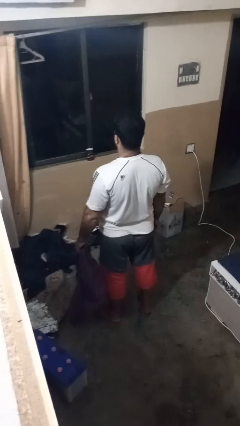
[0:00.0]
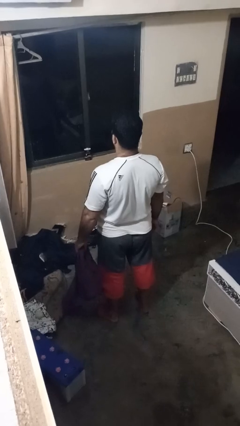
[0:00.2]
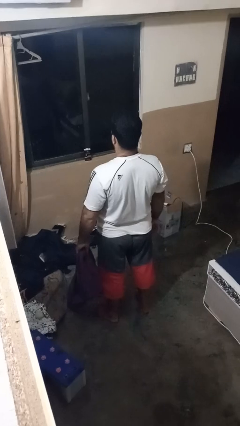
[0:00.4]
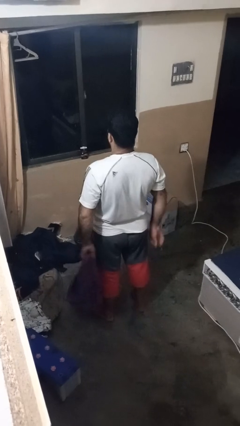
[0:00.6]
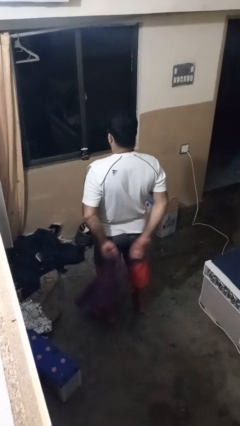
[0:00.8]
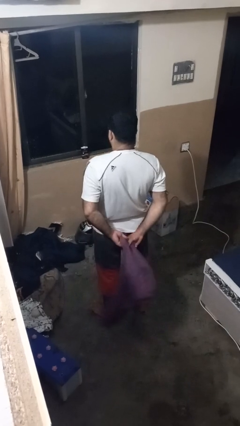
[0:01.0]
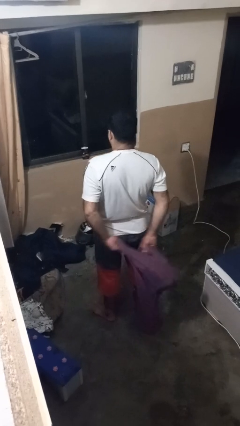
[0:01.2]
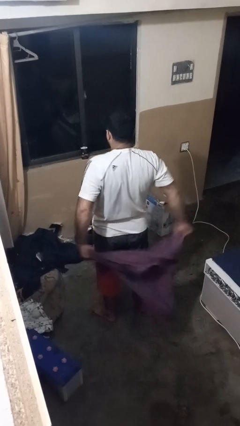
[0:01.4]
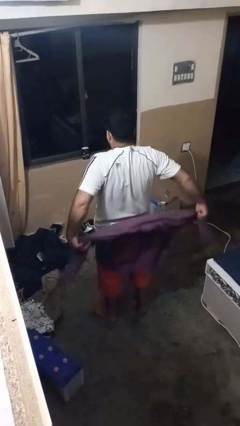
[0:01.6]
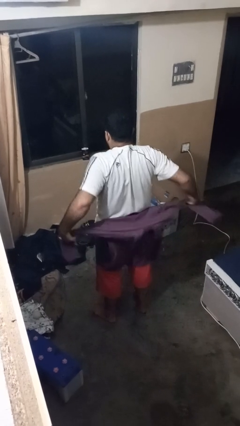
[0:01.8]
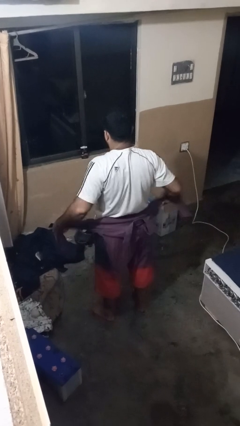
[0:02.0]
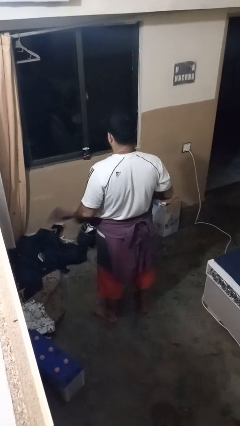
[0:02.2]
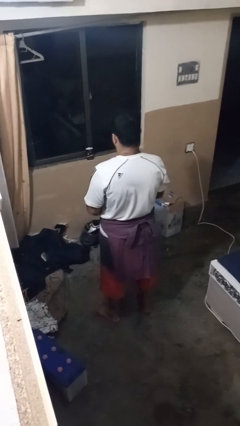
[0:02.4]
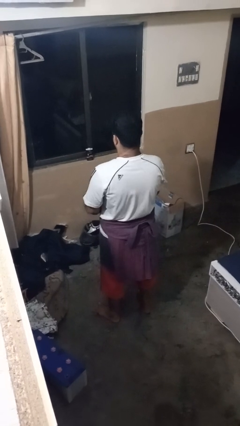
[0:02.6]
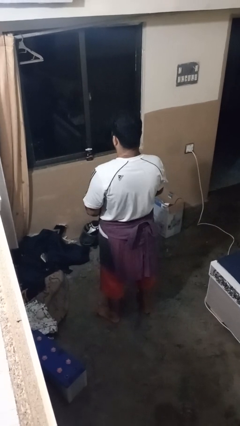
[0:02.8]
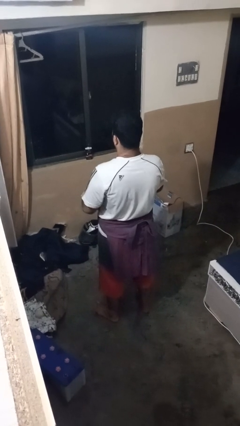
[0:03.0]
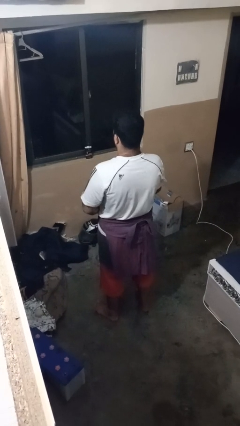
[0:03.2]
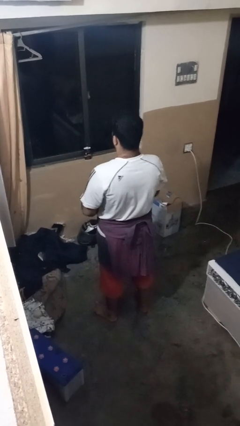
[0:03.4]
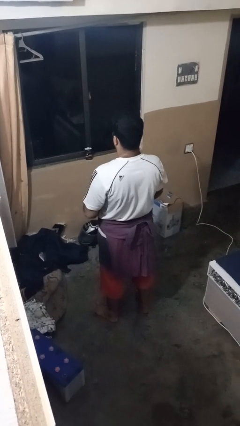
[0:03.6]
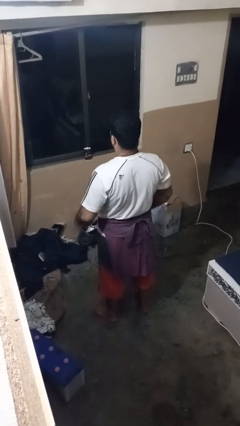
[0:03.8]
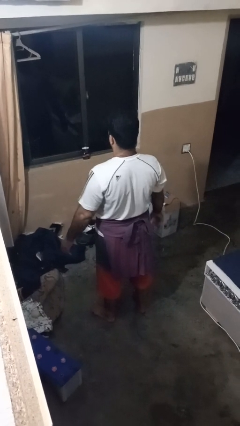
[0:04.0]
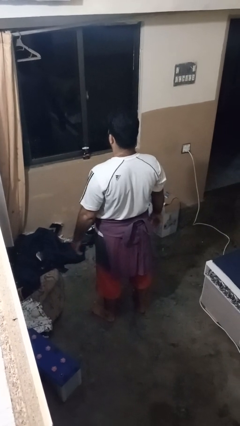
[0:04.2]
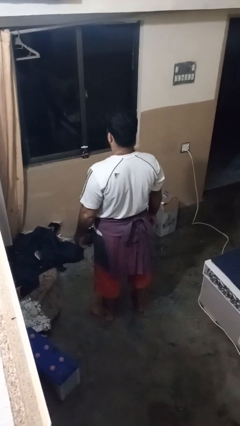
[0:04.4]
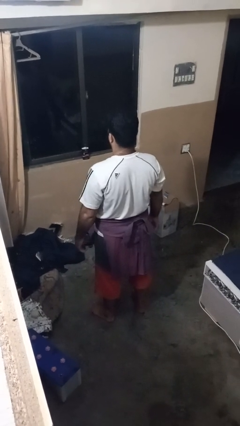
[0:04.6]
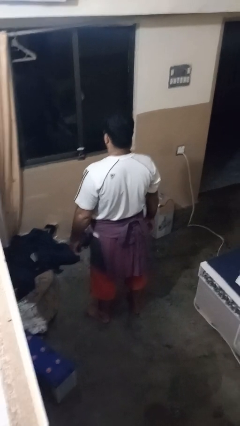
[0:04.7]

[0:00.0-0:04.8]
person ties jacket around waist

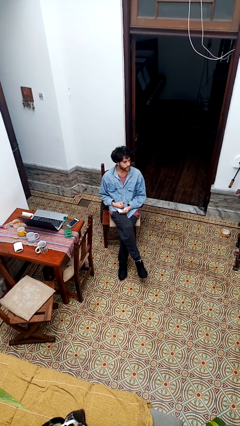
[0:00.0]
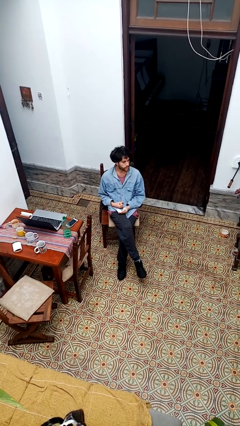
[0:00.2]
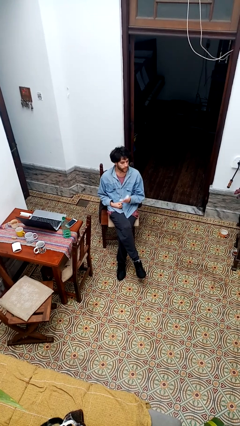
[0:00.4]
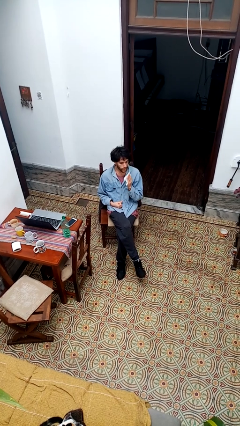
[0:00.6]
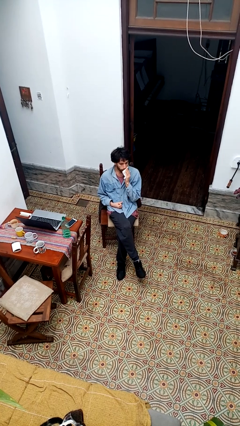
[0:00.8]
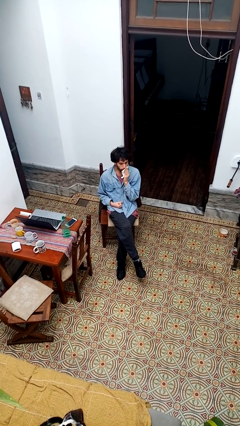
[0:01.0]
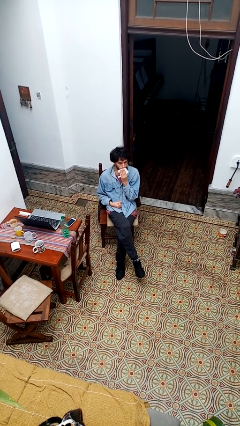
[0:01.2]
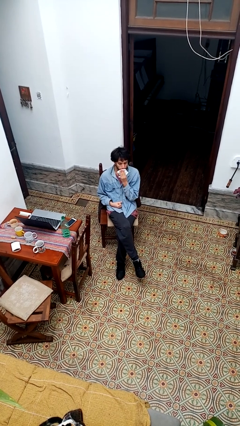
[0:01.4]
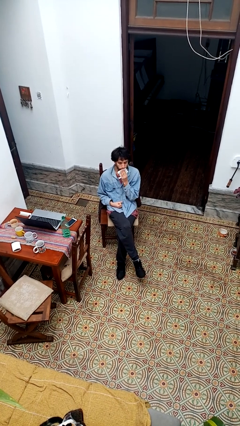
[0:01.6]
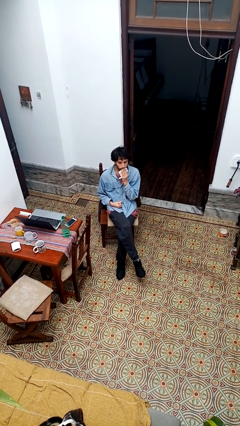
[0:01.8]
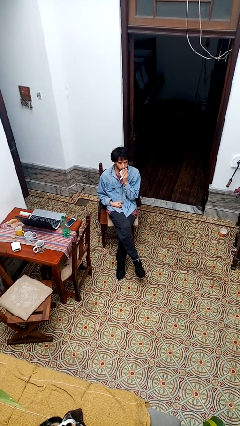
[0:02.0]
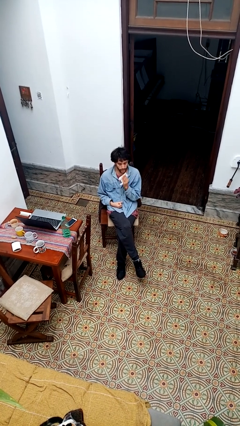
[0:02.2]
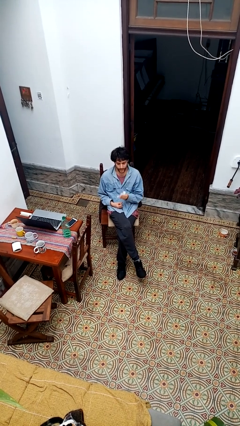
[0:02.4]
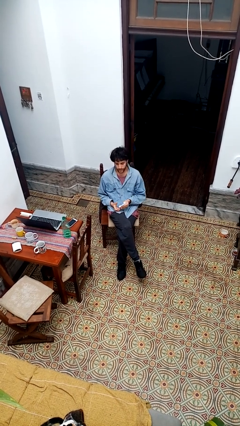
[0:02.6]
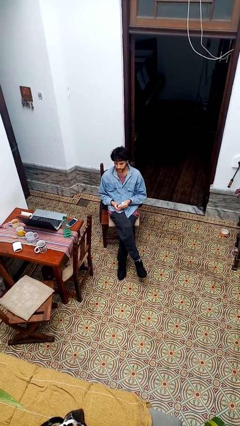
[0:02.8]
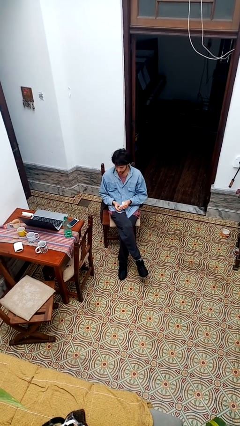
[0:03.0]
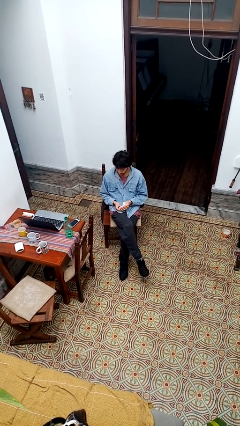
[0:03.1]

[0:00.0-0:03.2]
person wipes mouth with napkin

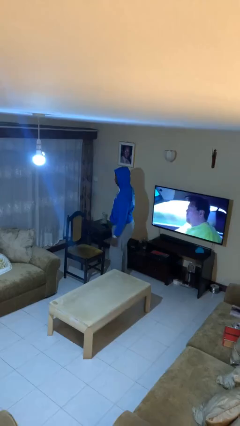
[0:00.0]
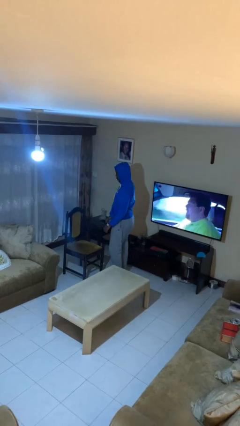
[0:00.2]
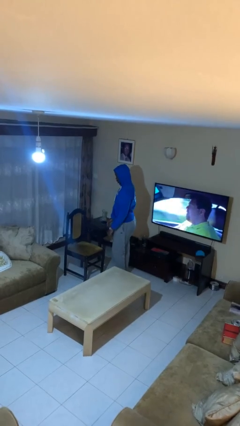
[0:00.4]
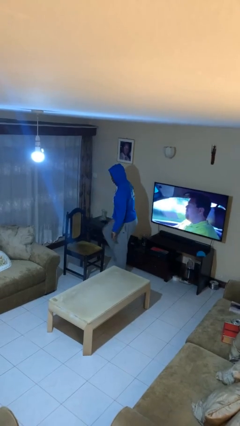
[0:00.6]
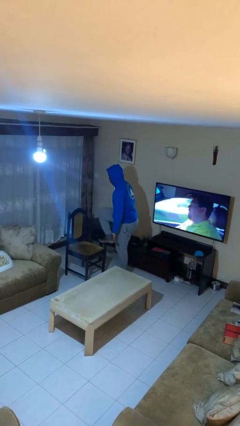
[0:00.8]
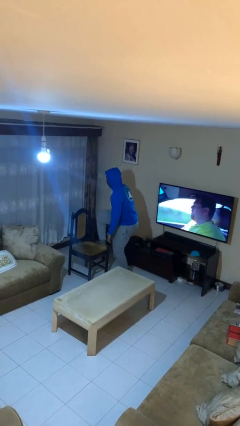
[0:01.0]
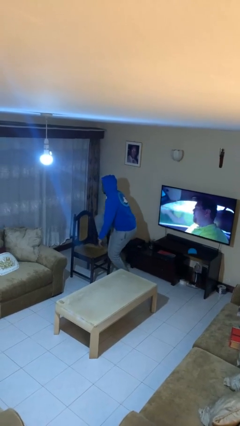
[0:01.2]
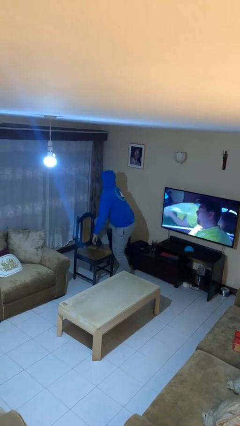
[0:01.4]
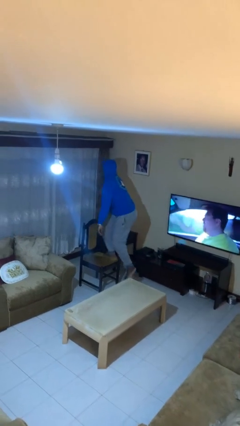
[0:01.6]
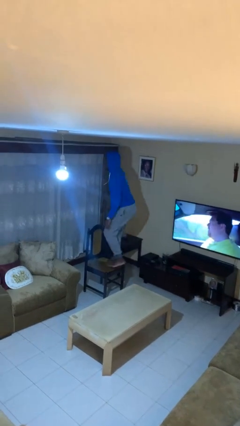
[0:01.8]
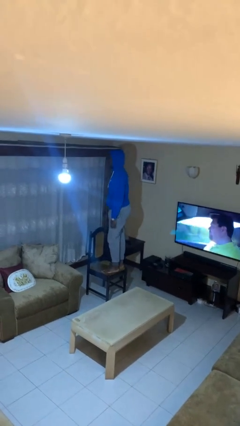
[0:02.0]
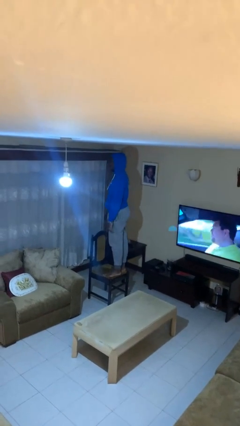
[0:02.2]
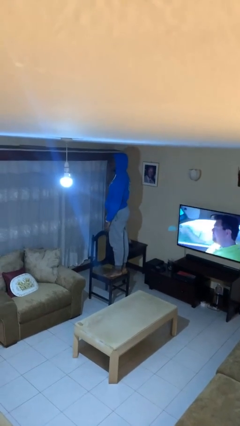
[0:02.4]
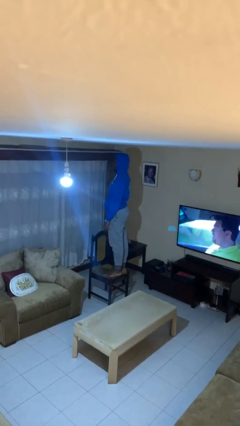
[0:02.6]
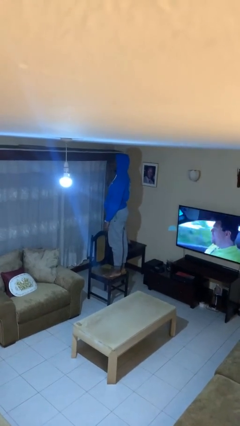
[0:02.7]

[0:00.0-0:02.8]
person climbs on chair

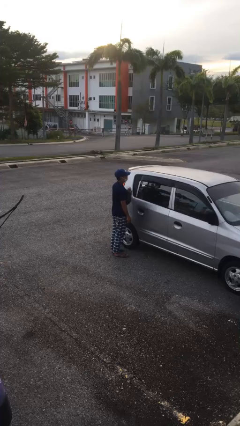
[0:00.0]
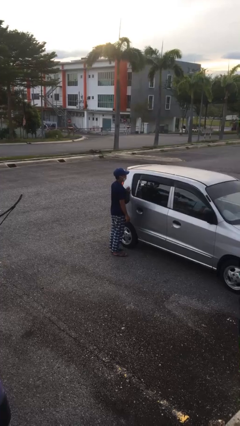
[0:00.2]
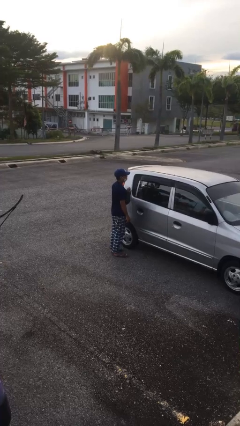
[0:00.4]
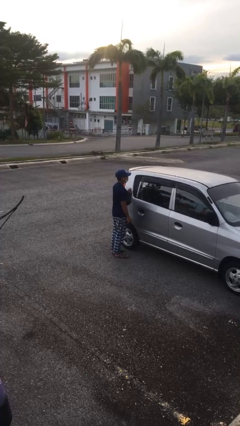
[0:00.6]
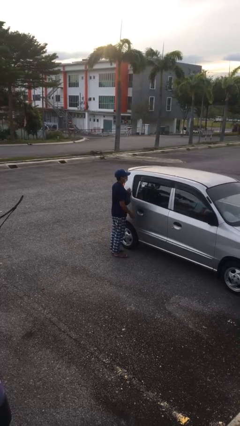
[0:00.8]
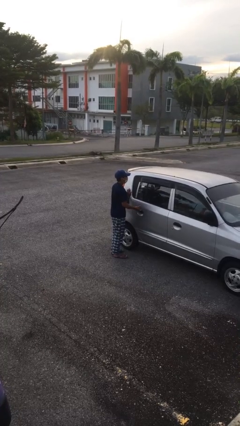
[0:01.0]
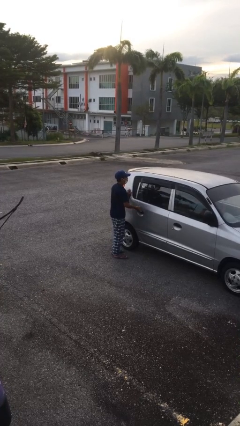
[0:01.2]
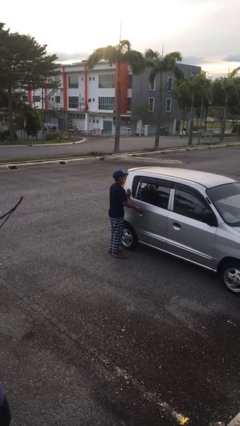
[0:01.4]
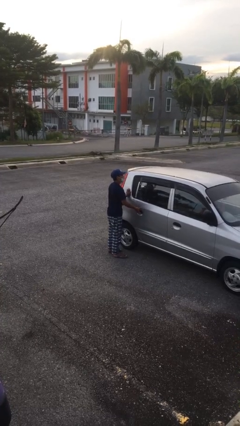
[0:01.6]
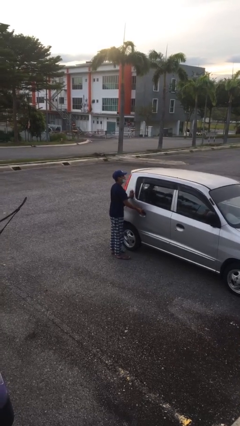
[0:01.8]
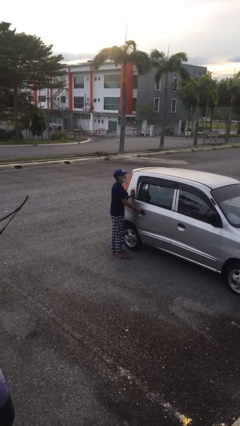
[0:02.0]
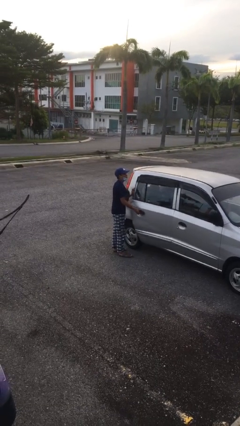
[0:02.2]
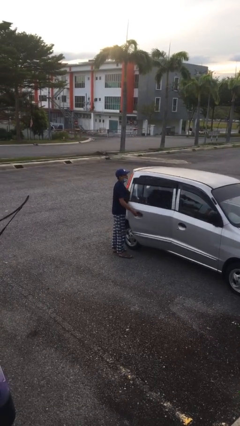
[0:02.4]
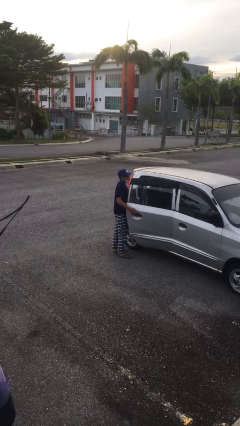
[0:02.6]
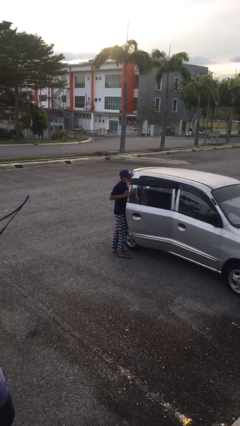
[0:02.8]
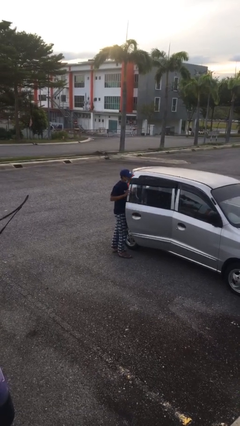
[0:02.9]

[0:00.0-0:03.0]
person opens car door

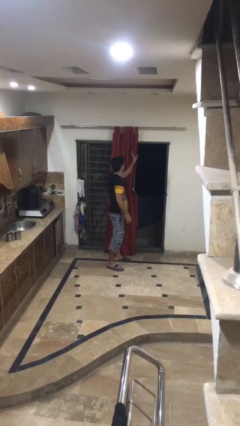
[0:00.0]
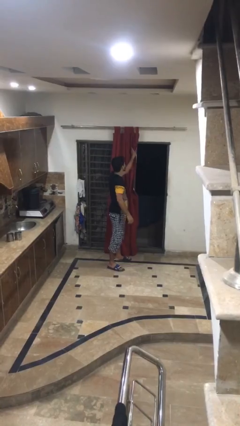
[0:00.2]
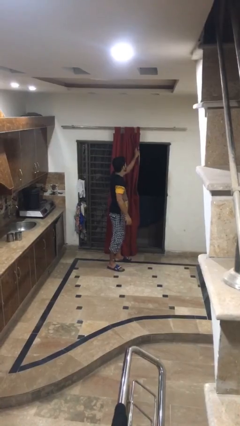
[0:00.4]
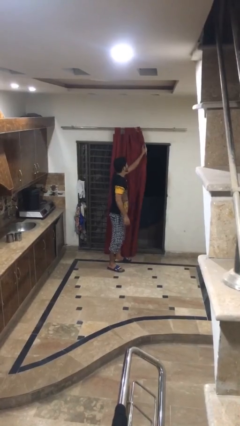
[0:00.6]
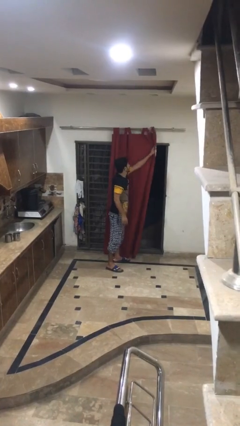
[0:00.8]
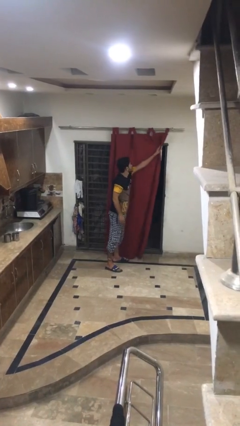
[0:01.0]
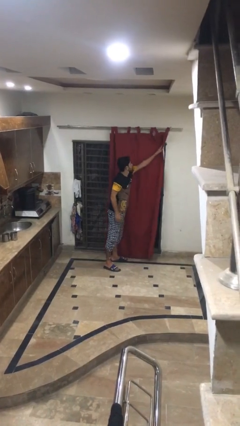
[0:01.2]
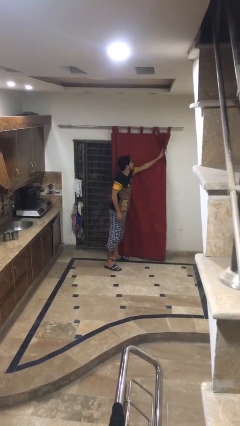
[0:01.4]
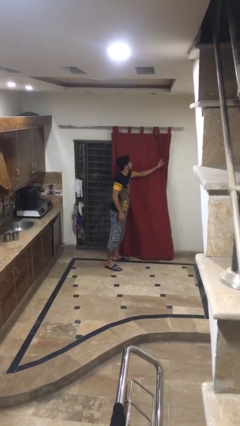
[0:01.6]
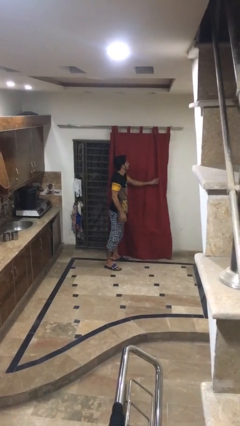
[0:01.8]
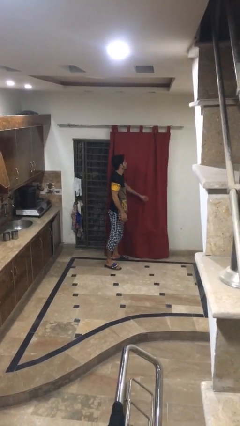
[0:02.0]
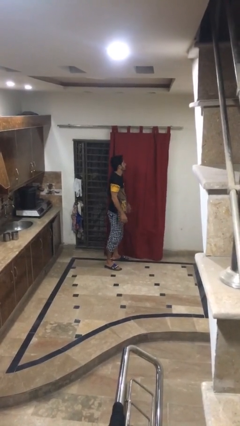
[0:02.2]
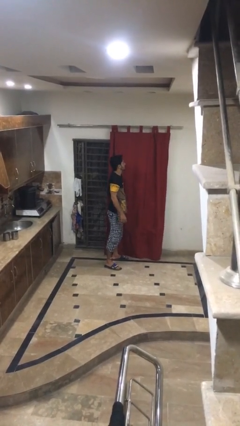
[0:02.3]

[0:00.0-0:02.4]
person closes curtains

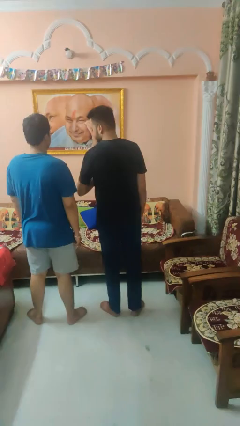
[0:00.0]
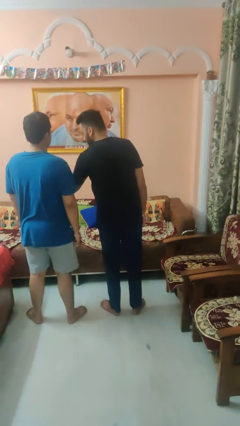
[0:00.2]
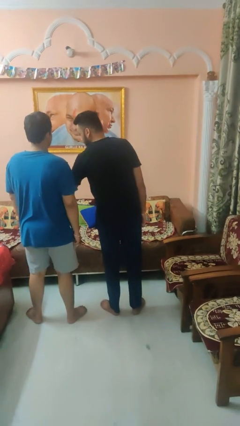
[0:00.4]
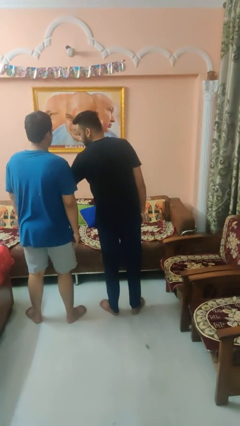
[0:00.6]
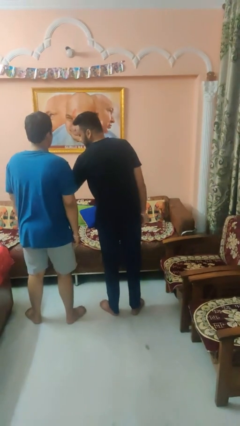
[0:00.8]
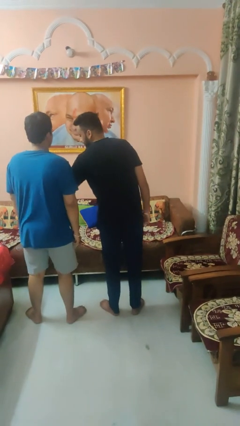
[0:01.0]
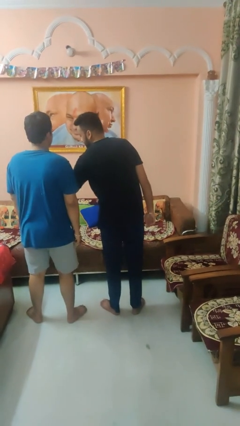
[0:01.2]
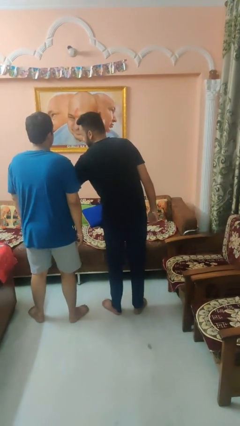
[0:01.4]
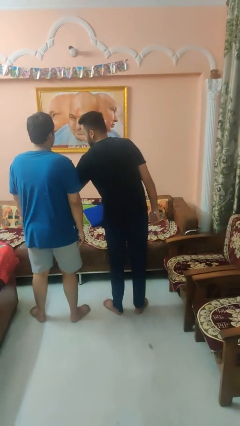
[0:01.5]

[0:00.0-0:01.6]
person nudges person with elbow
